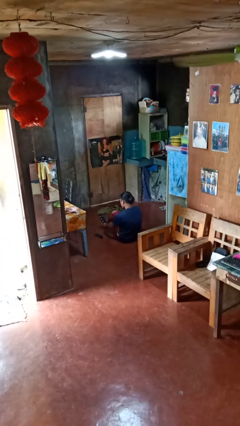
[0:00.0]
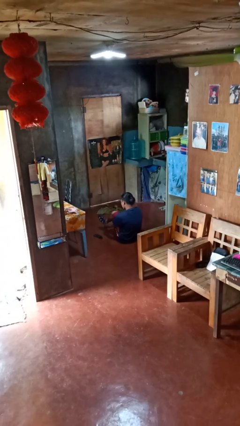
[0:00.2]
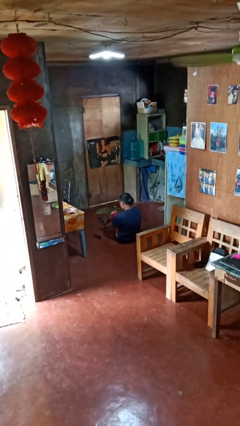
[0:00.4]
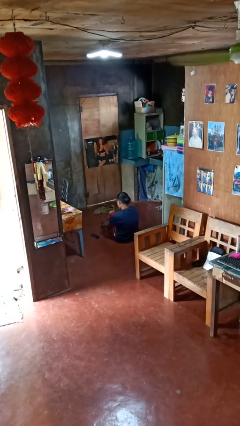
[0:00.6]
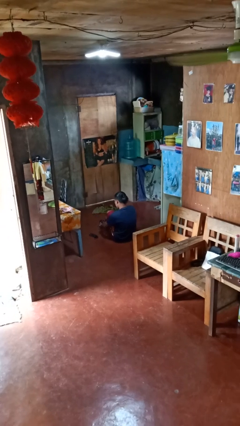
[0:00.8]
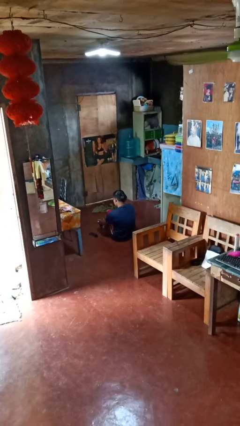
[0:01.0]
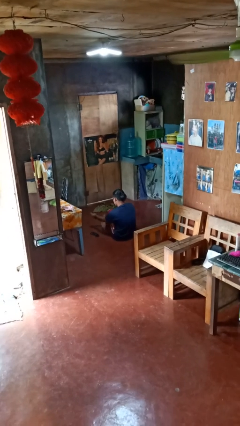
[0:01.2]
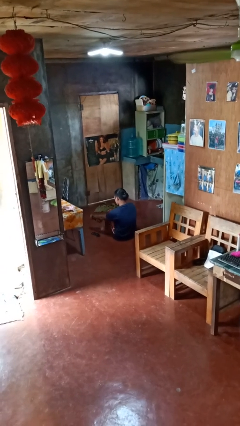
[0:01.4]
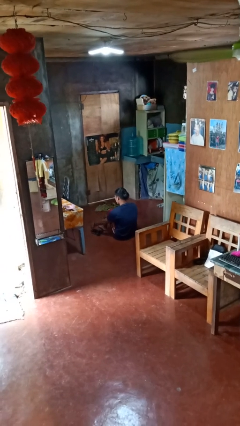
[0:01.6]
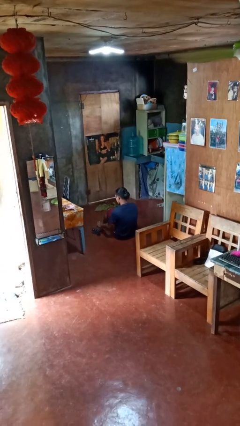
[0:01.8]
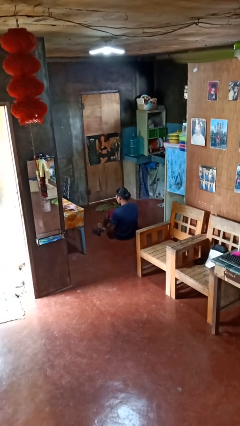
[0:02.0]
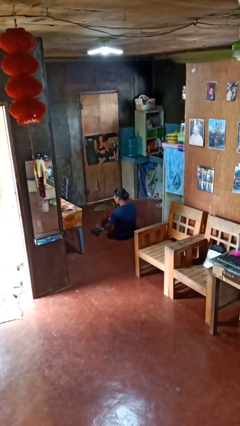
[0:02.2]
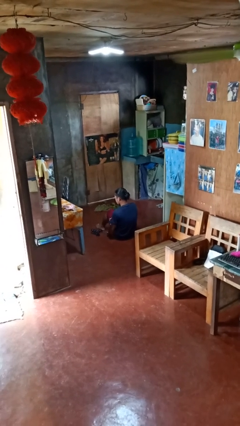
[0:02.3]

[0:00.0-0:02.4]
person takes off socks

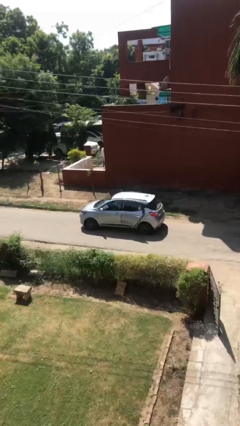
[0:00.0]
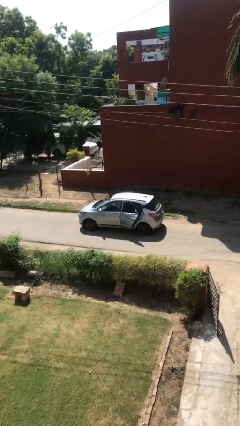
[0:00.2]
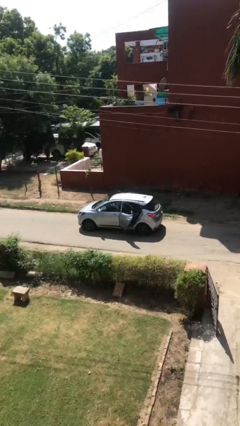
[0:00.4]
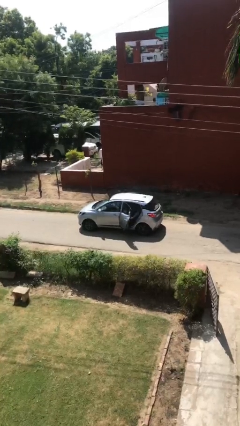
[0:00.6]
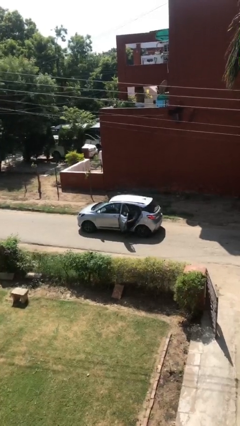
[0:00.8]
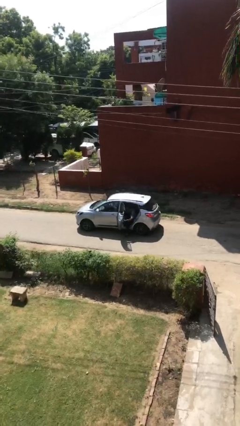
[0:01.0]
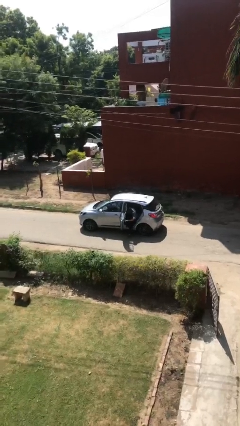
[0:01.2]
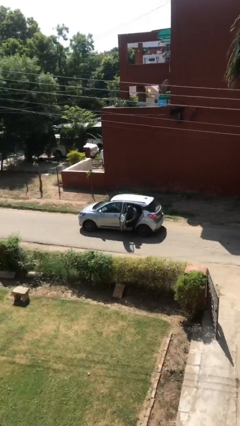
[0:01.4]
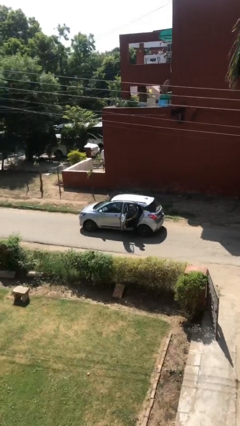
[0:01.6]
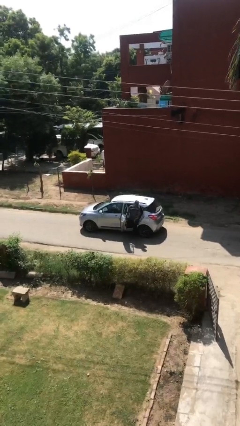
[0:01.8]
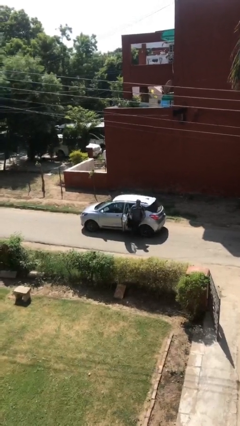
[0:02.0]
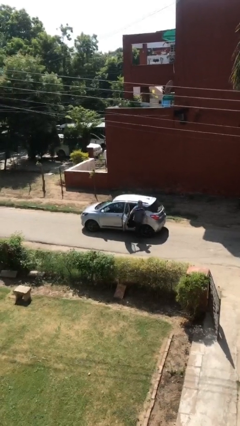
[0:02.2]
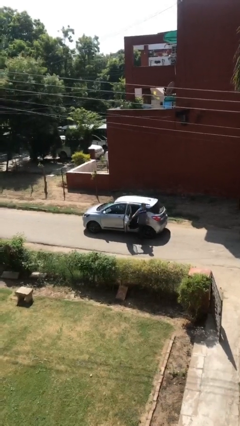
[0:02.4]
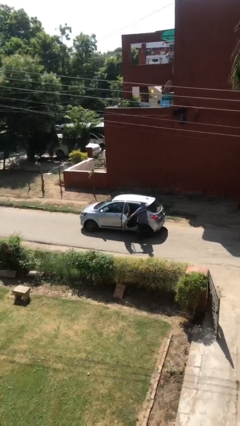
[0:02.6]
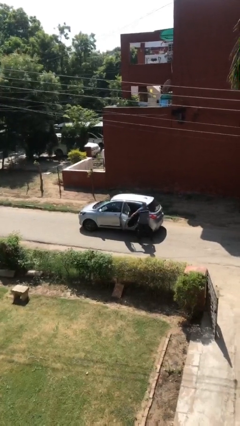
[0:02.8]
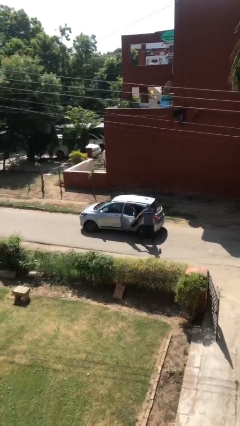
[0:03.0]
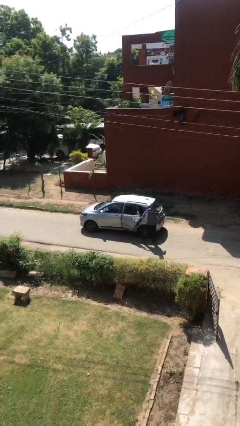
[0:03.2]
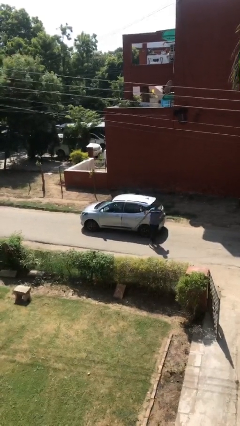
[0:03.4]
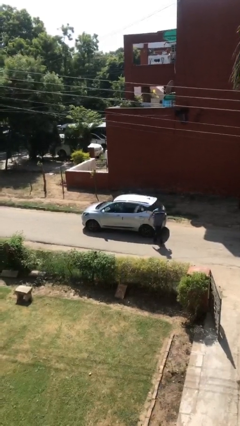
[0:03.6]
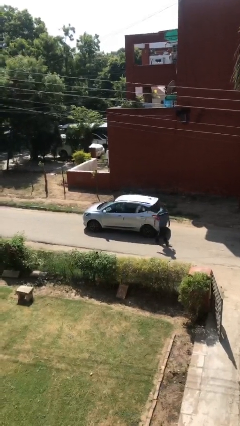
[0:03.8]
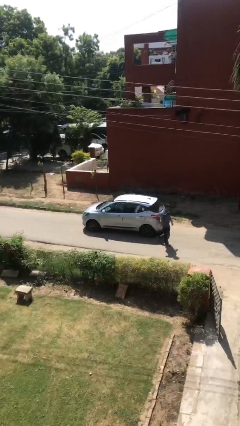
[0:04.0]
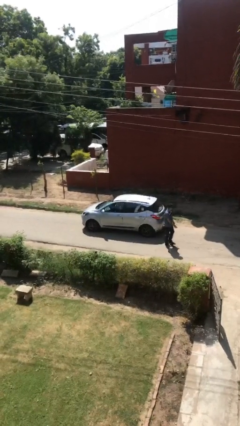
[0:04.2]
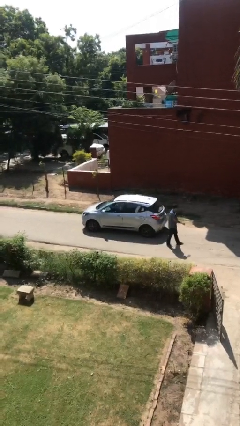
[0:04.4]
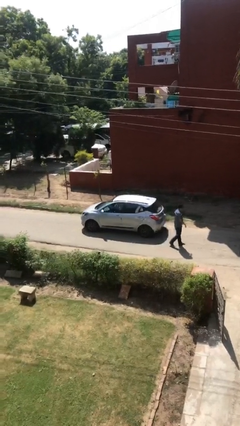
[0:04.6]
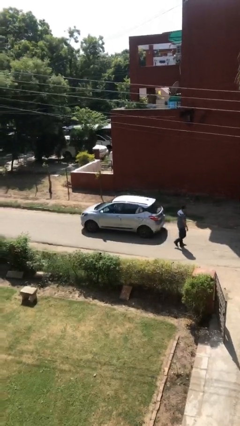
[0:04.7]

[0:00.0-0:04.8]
car drops off person

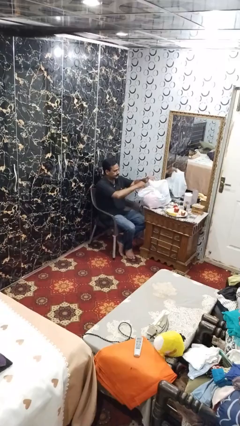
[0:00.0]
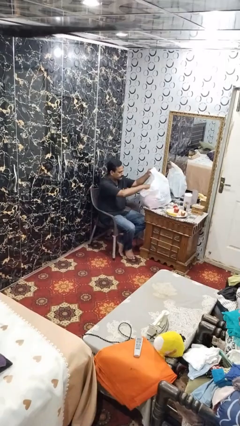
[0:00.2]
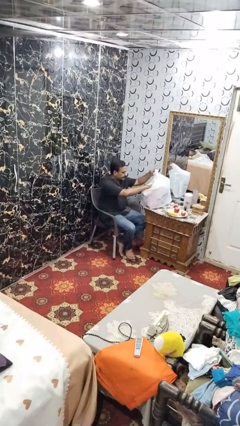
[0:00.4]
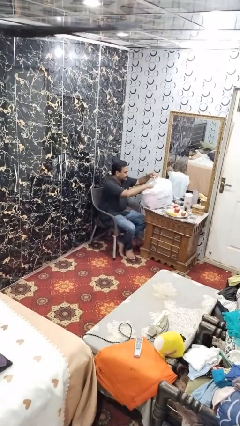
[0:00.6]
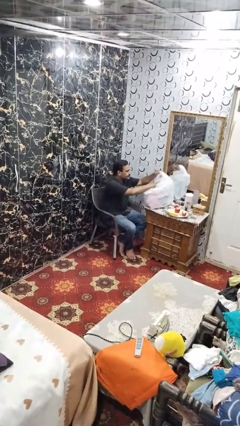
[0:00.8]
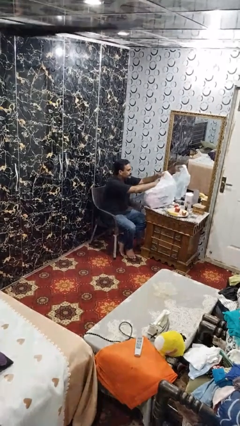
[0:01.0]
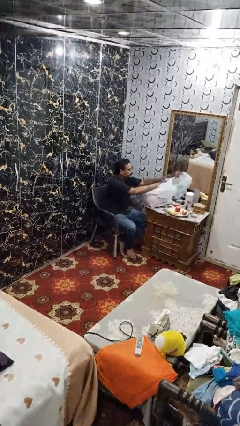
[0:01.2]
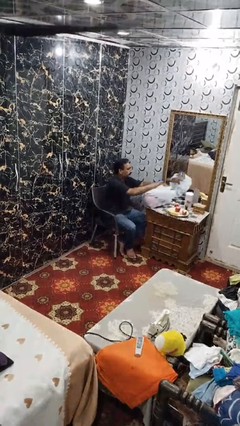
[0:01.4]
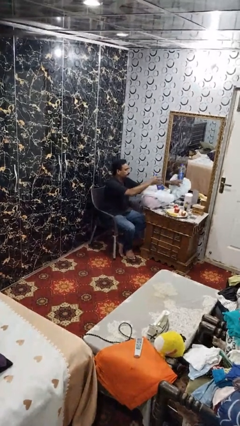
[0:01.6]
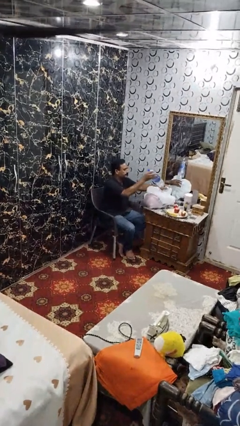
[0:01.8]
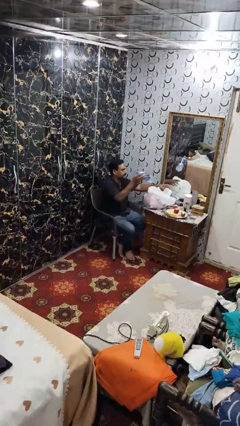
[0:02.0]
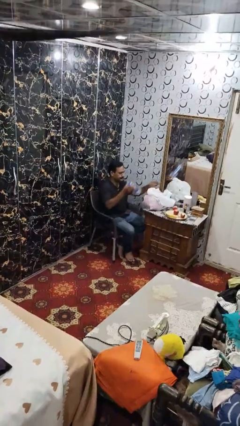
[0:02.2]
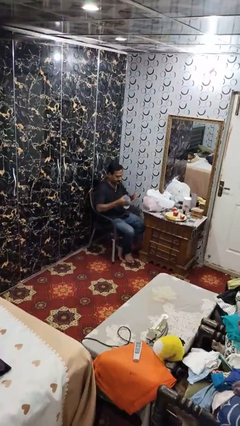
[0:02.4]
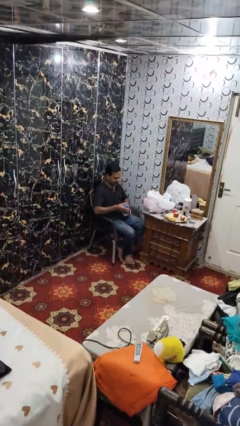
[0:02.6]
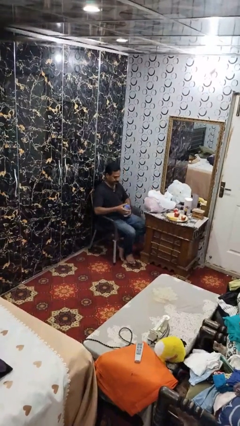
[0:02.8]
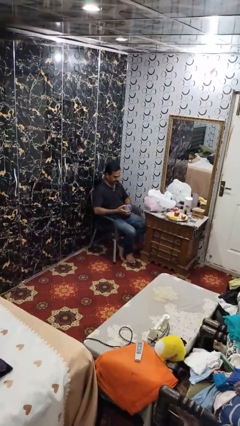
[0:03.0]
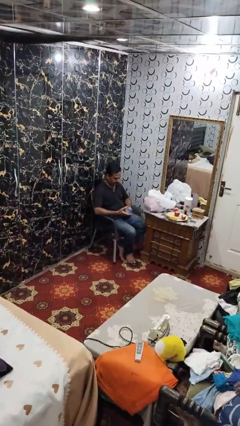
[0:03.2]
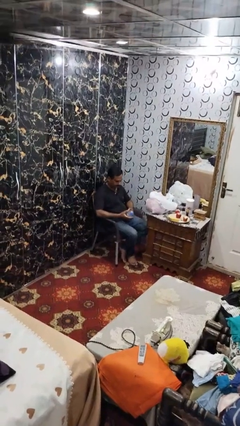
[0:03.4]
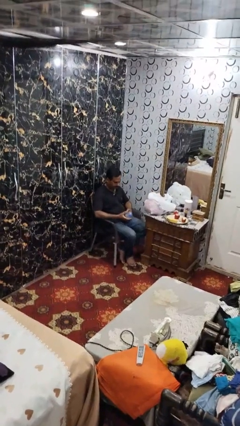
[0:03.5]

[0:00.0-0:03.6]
person takes object from bag

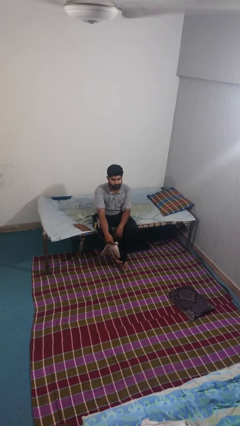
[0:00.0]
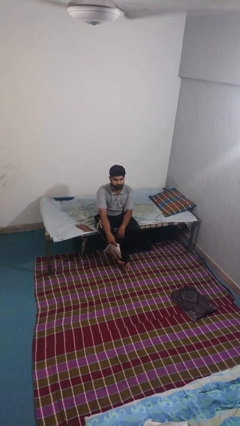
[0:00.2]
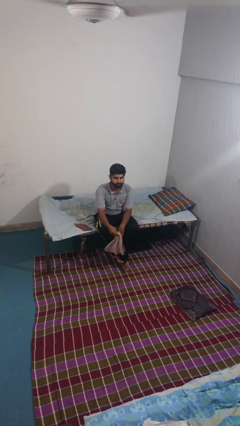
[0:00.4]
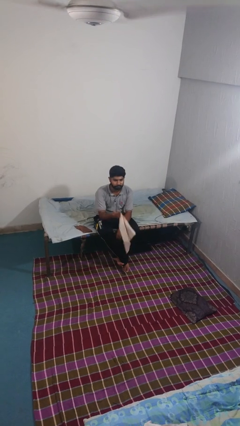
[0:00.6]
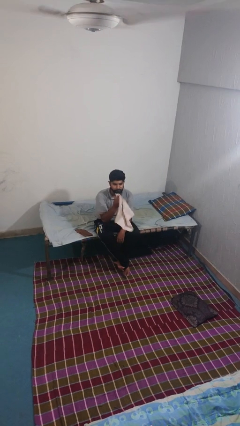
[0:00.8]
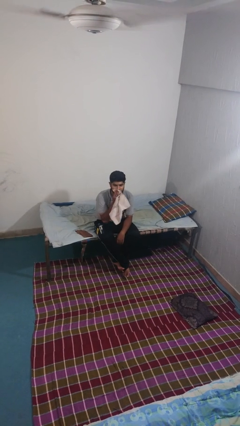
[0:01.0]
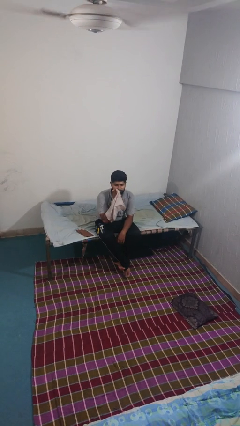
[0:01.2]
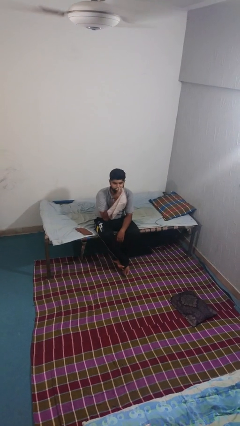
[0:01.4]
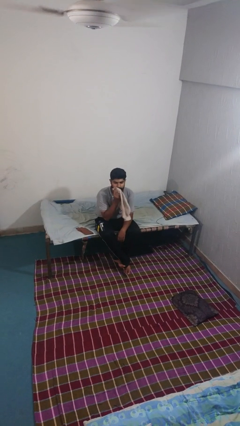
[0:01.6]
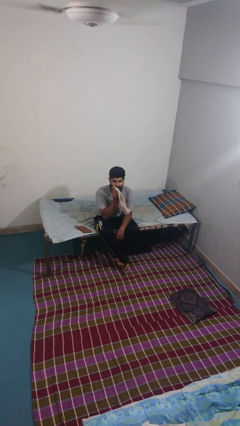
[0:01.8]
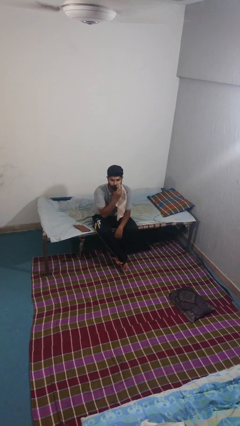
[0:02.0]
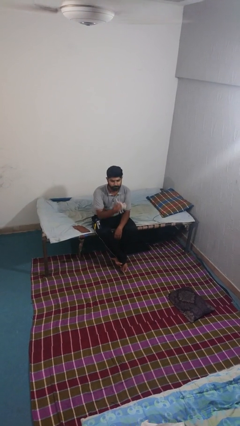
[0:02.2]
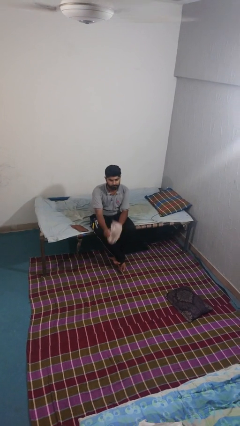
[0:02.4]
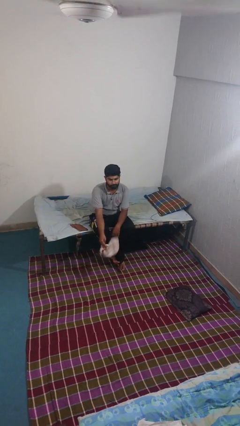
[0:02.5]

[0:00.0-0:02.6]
person wipes mouth with napkin

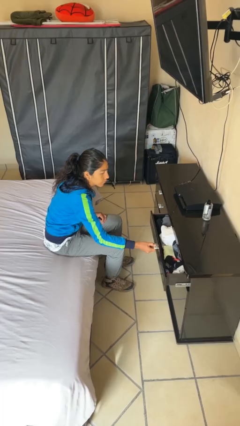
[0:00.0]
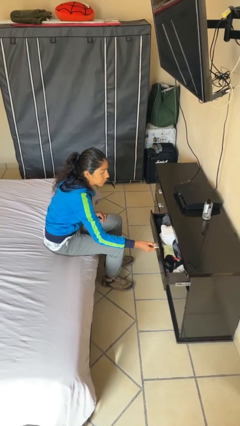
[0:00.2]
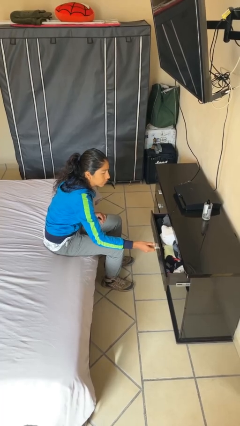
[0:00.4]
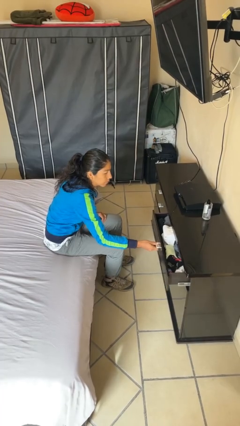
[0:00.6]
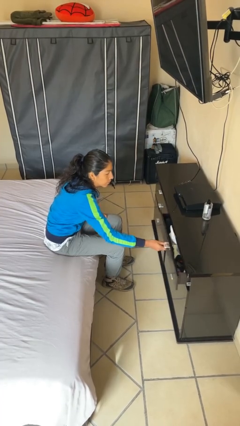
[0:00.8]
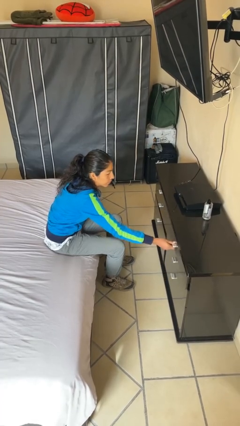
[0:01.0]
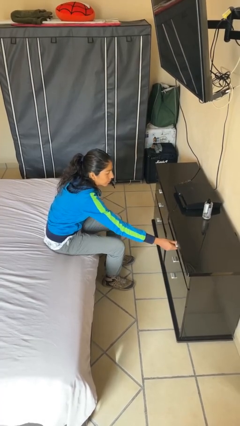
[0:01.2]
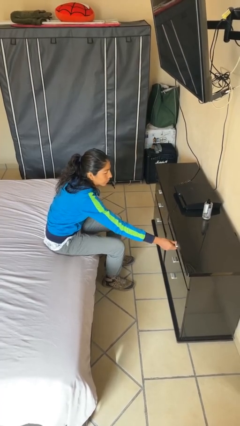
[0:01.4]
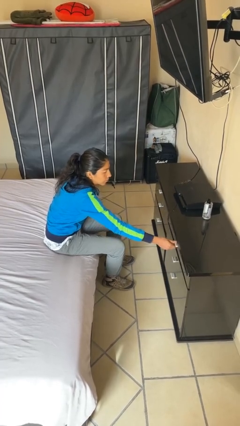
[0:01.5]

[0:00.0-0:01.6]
person closes dresser drawer

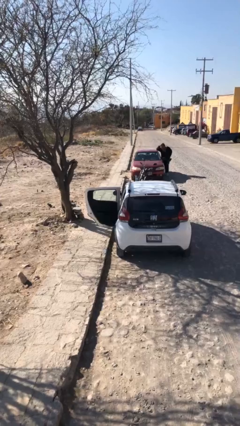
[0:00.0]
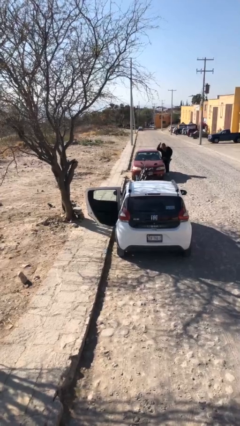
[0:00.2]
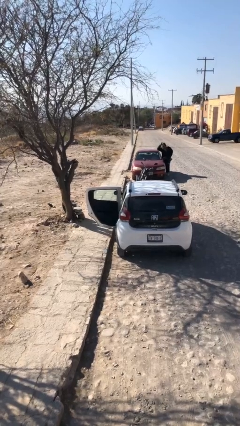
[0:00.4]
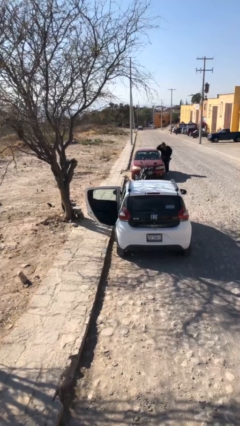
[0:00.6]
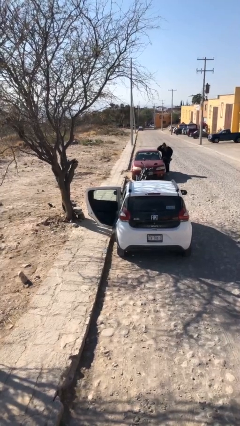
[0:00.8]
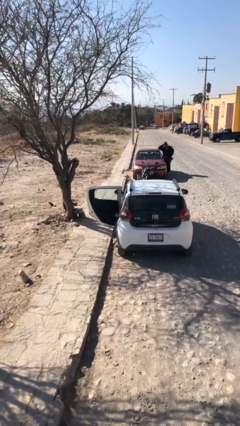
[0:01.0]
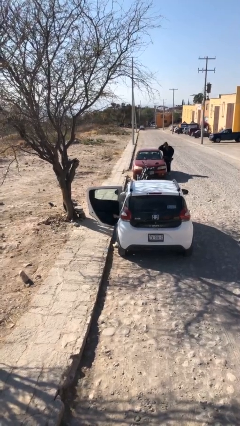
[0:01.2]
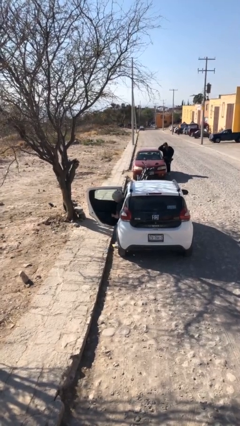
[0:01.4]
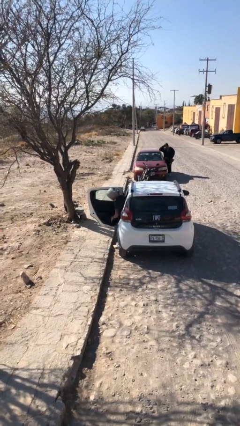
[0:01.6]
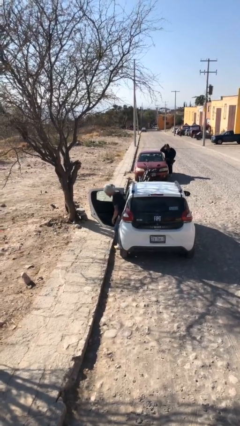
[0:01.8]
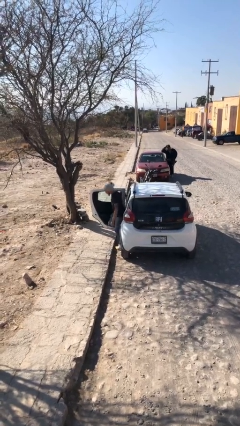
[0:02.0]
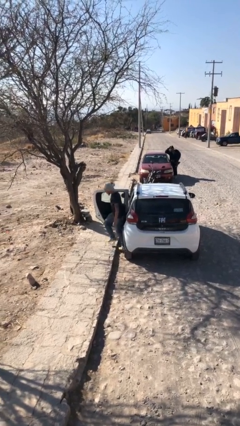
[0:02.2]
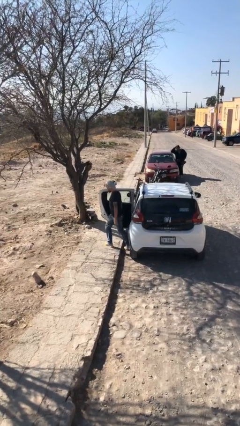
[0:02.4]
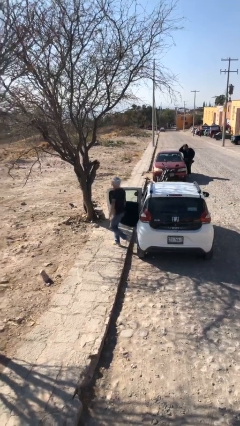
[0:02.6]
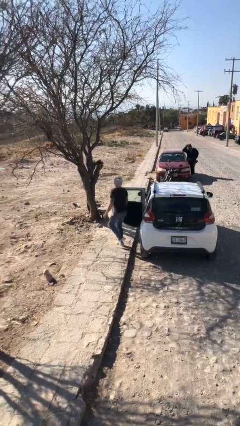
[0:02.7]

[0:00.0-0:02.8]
person exits car
